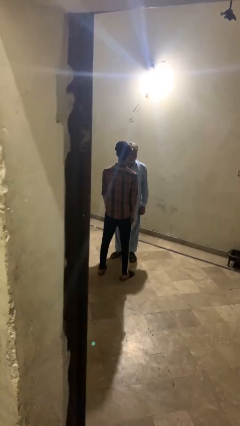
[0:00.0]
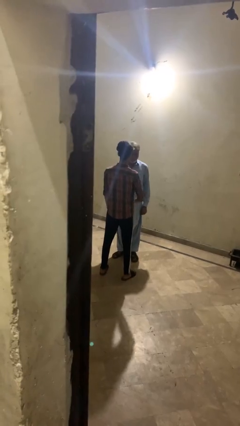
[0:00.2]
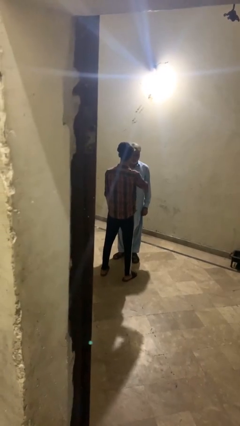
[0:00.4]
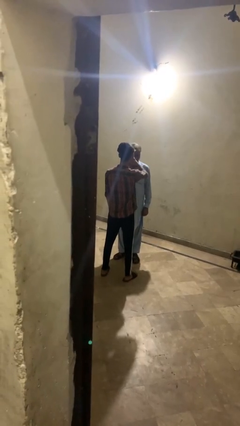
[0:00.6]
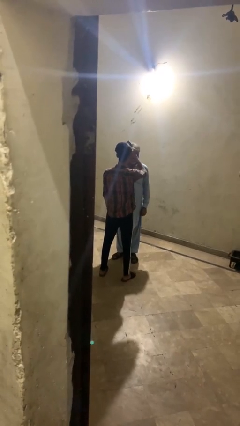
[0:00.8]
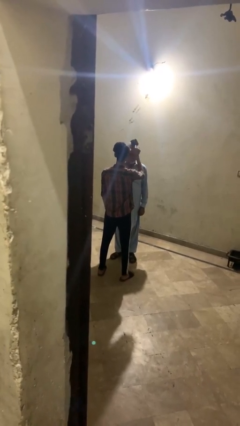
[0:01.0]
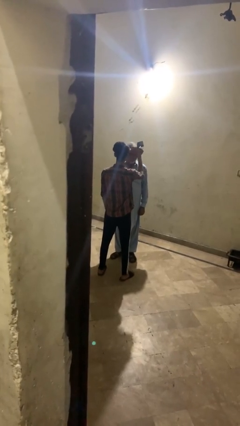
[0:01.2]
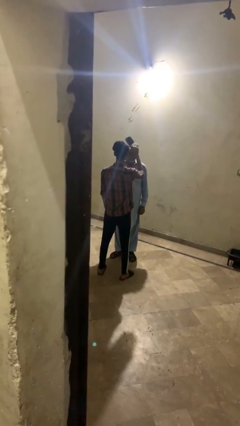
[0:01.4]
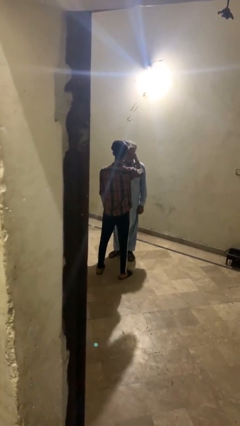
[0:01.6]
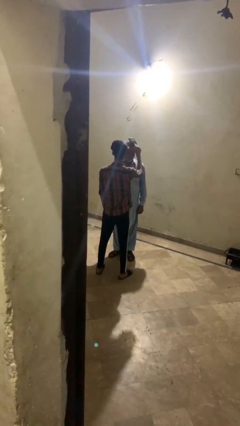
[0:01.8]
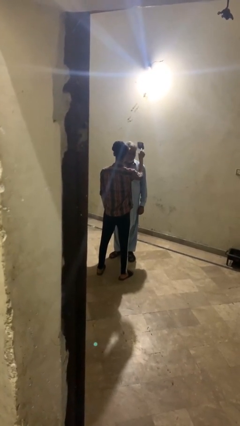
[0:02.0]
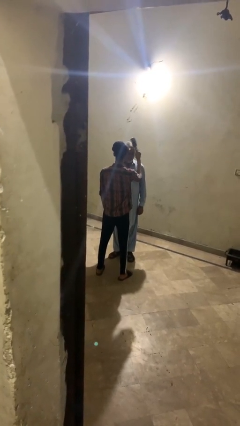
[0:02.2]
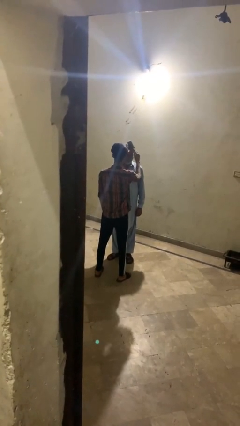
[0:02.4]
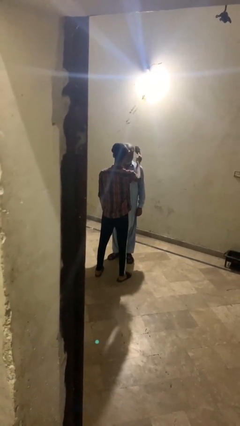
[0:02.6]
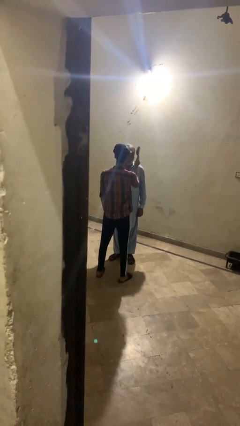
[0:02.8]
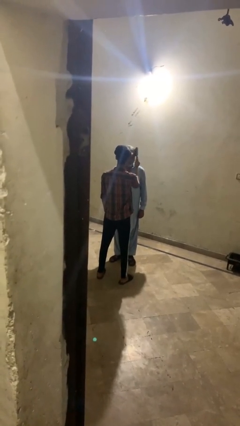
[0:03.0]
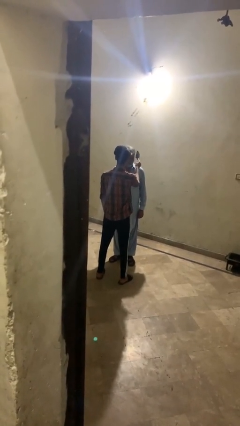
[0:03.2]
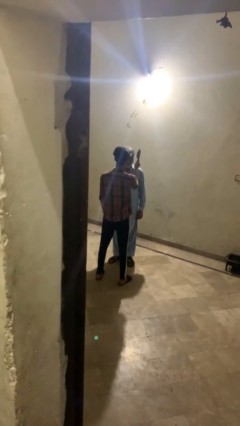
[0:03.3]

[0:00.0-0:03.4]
person brushes hair of person

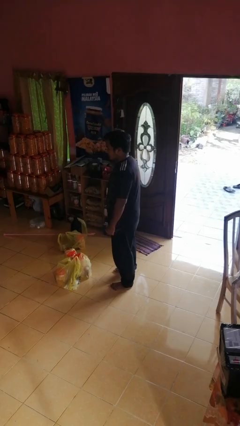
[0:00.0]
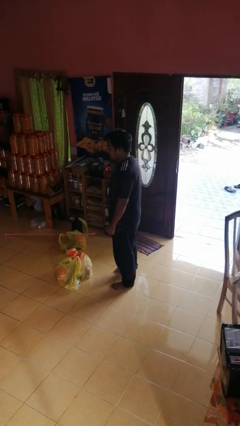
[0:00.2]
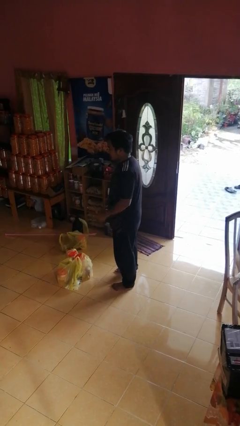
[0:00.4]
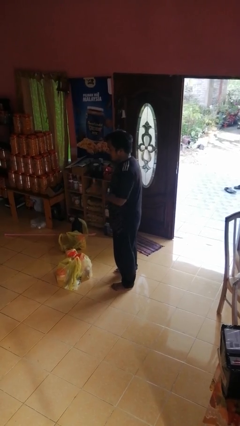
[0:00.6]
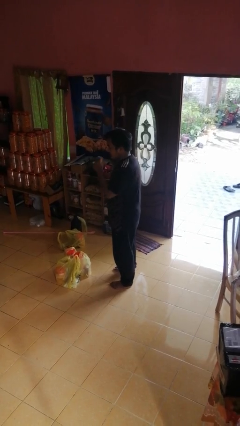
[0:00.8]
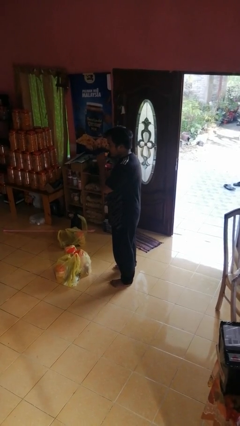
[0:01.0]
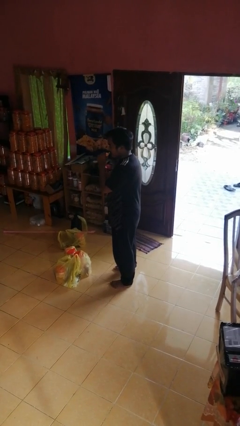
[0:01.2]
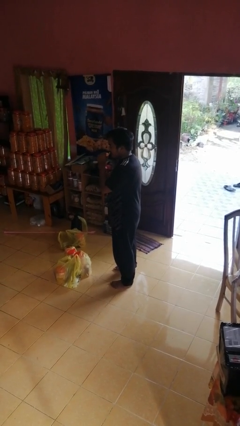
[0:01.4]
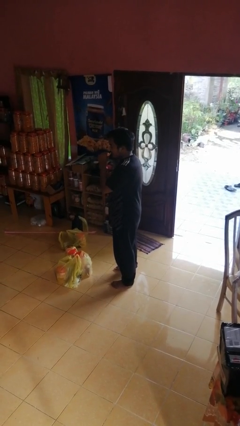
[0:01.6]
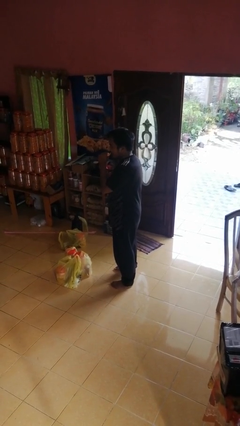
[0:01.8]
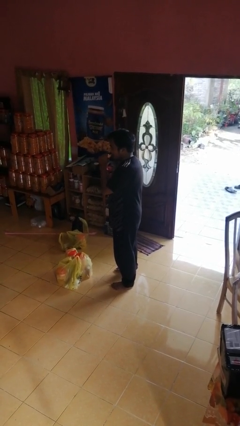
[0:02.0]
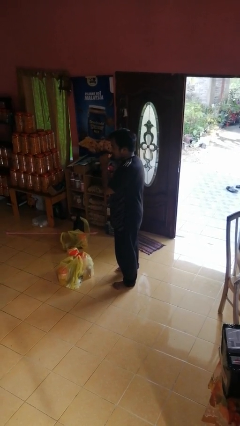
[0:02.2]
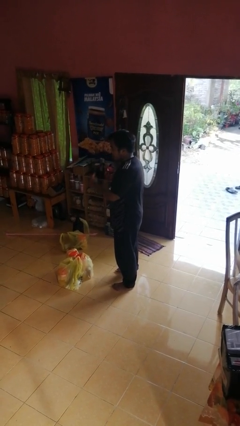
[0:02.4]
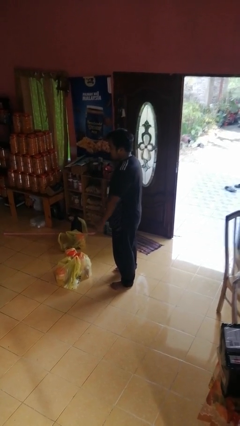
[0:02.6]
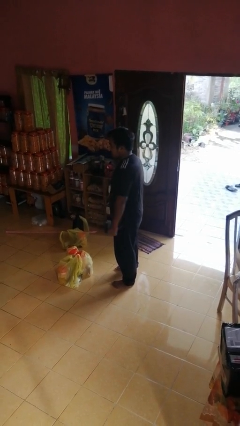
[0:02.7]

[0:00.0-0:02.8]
person eats banana

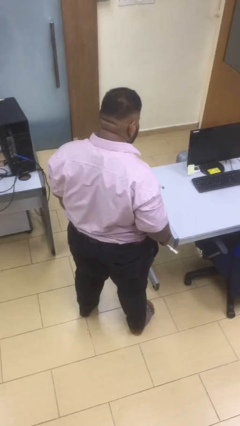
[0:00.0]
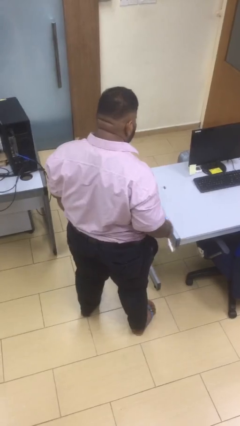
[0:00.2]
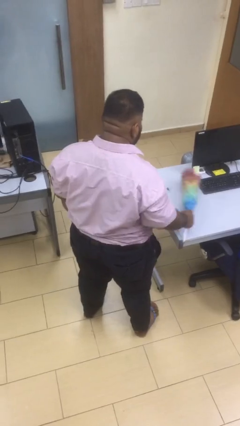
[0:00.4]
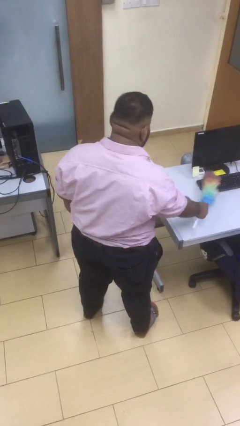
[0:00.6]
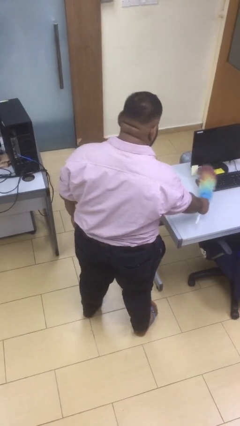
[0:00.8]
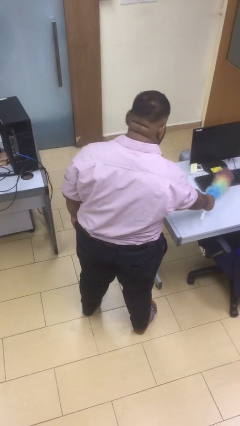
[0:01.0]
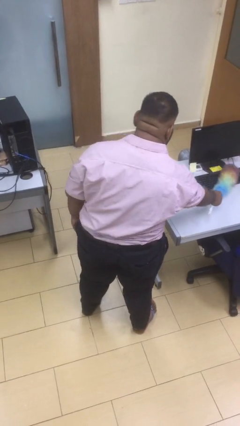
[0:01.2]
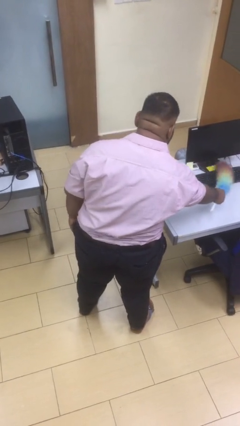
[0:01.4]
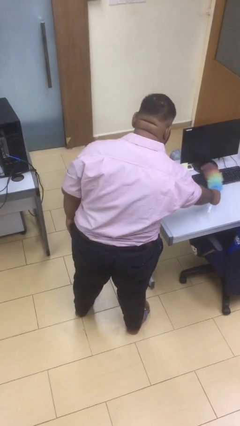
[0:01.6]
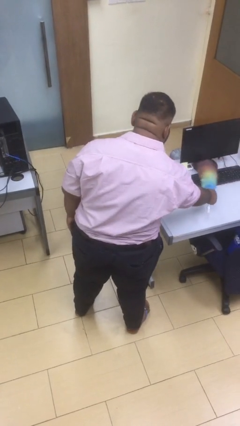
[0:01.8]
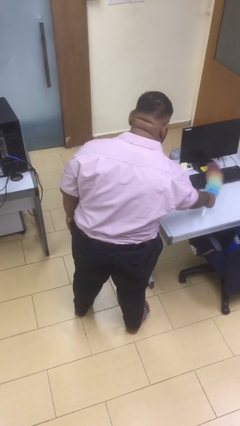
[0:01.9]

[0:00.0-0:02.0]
person dusts furniture

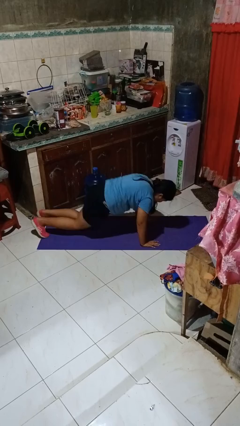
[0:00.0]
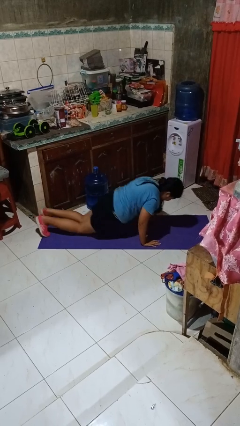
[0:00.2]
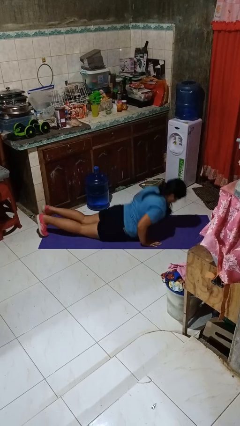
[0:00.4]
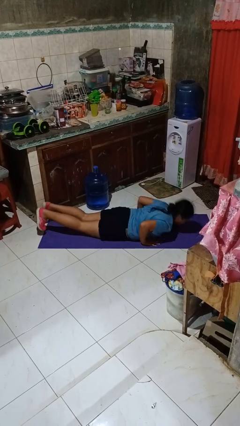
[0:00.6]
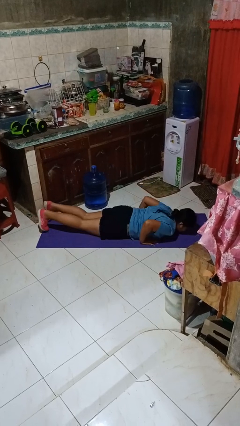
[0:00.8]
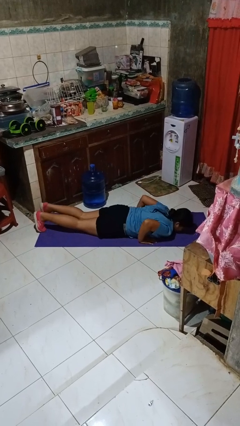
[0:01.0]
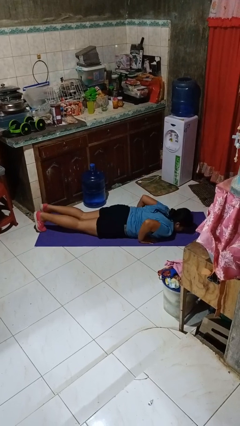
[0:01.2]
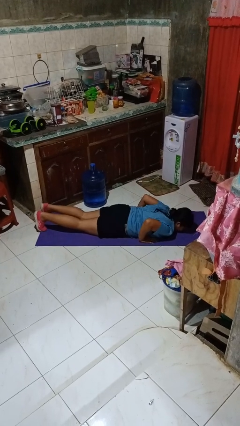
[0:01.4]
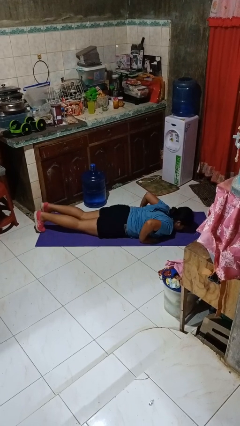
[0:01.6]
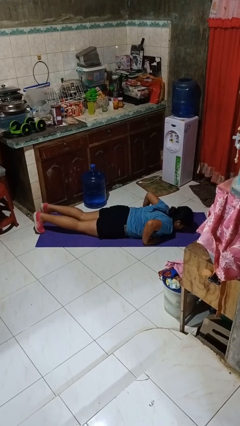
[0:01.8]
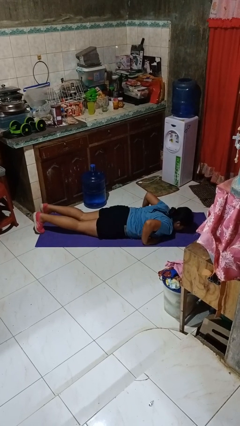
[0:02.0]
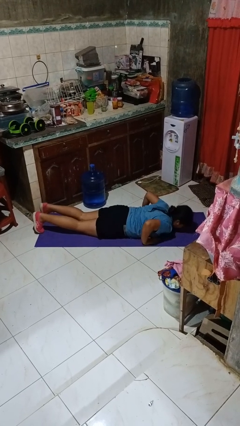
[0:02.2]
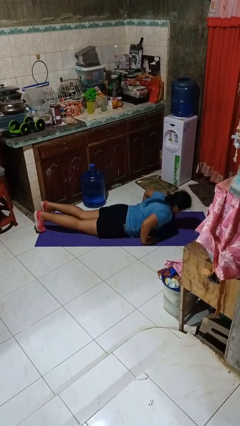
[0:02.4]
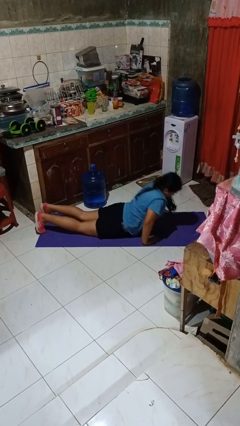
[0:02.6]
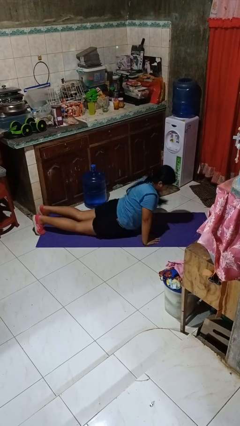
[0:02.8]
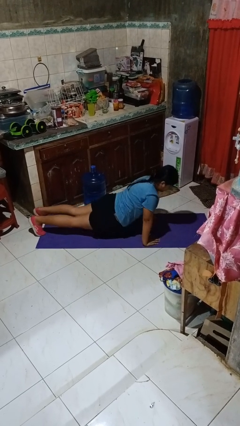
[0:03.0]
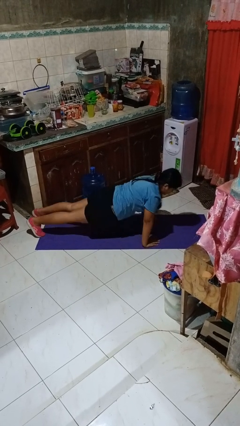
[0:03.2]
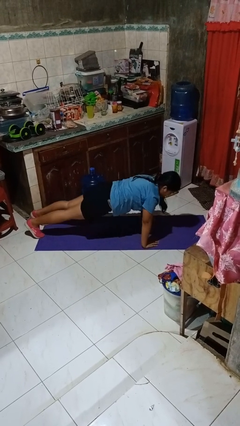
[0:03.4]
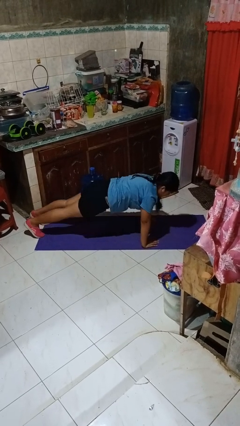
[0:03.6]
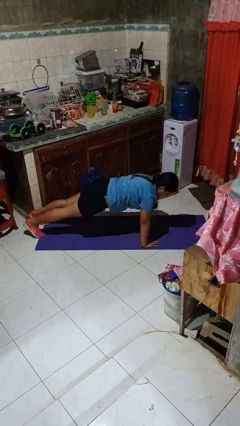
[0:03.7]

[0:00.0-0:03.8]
person exercises with pushup

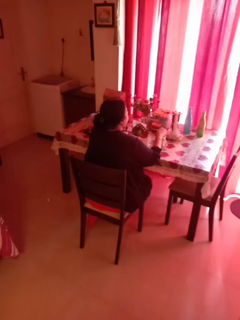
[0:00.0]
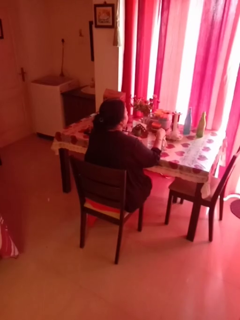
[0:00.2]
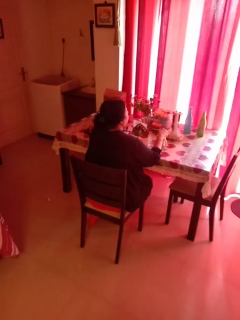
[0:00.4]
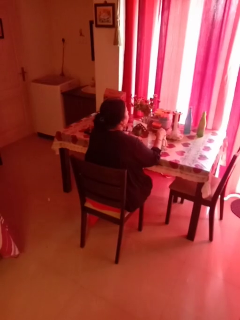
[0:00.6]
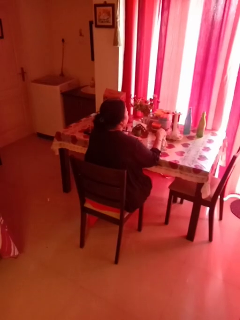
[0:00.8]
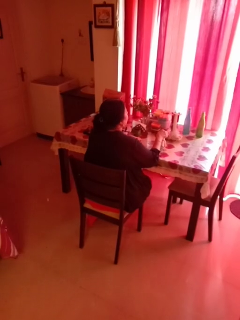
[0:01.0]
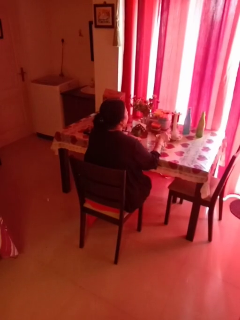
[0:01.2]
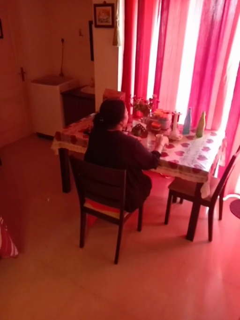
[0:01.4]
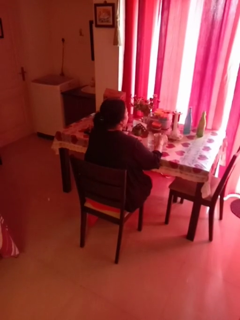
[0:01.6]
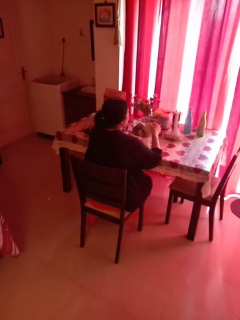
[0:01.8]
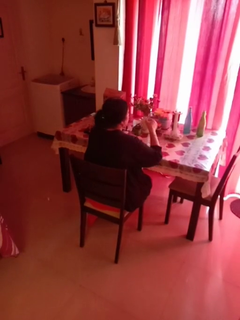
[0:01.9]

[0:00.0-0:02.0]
person stirs mug

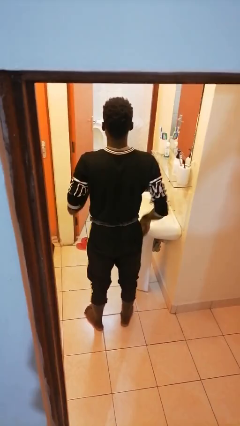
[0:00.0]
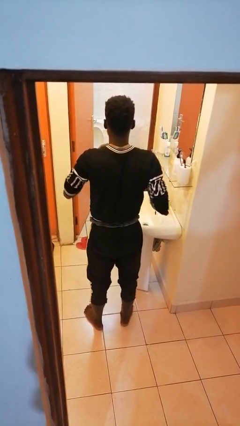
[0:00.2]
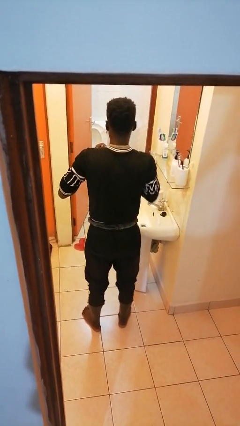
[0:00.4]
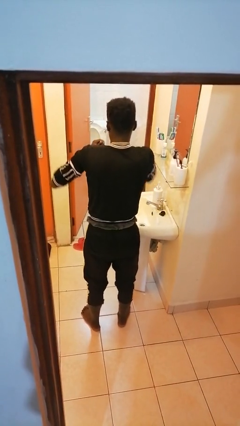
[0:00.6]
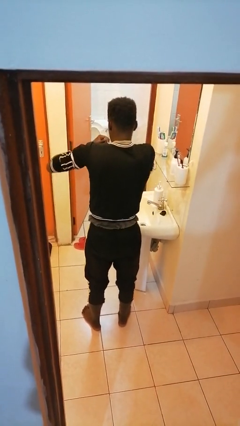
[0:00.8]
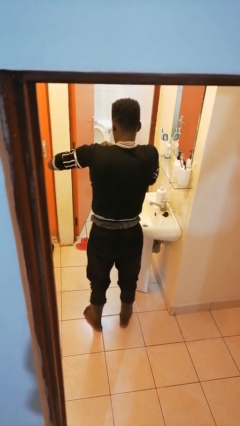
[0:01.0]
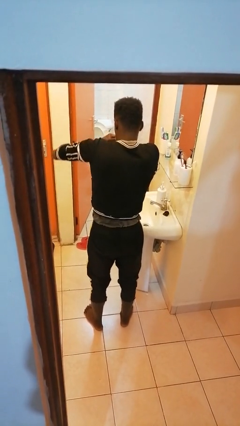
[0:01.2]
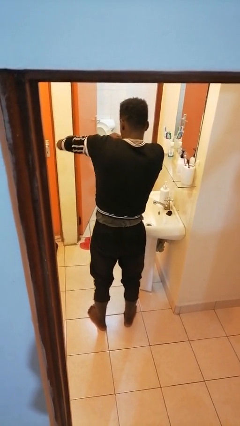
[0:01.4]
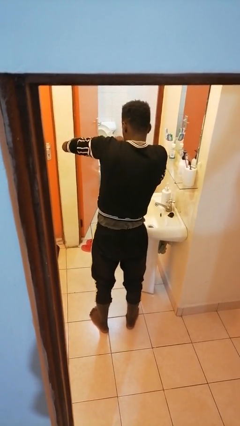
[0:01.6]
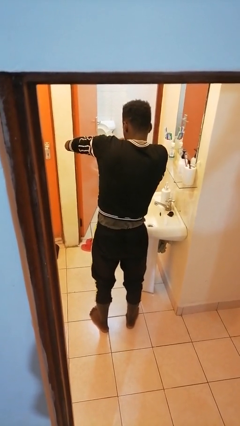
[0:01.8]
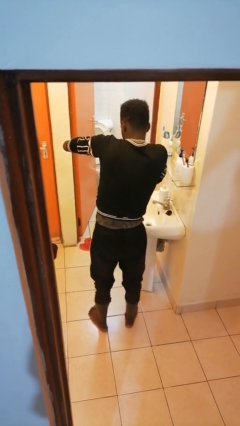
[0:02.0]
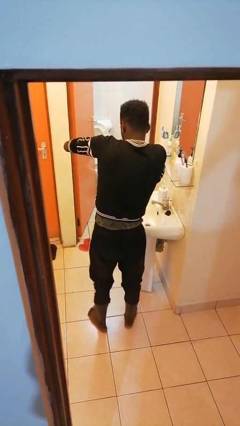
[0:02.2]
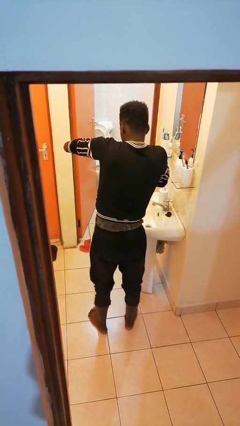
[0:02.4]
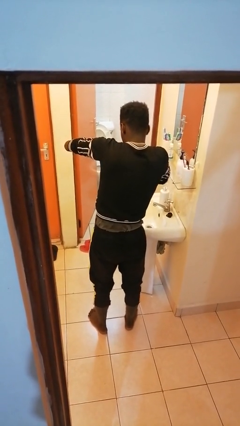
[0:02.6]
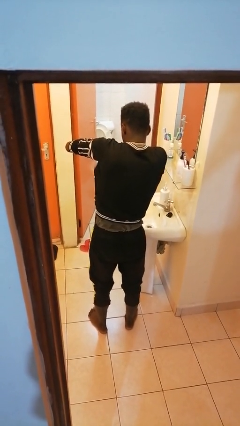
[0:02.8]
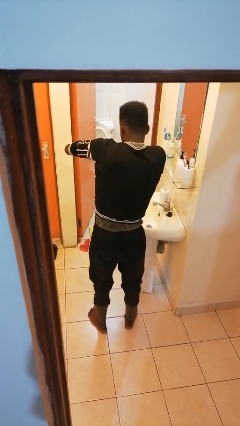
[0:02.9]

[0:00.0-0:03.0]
person applies deodorant

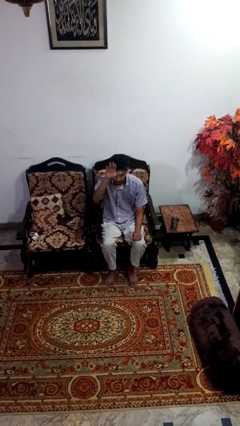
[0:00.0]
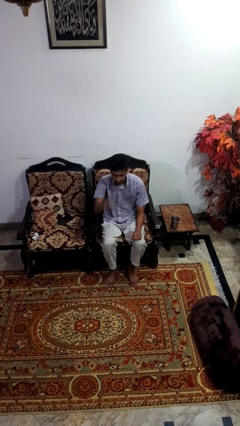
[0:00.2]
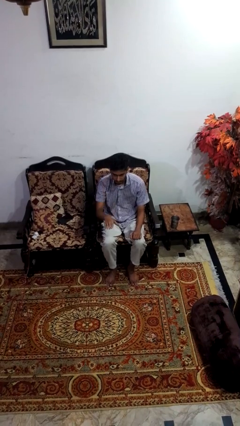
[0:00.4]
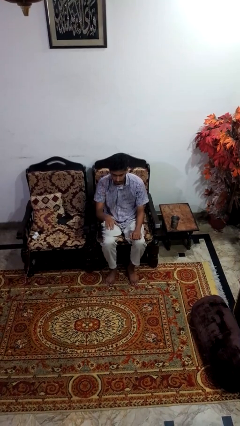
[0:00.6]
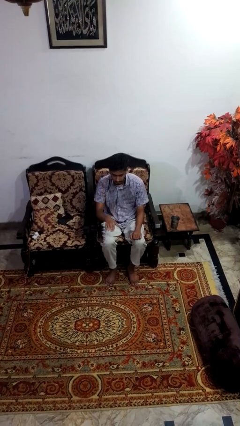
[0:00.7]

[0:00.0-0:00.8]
person gestures swipe down
